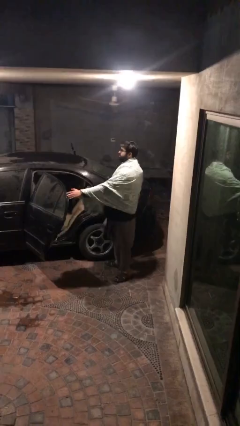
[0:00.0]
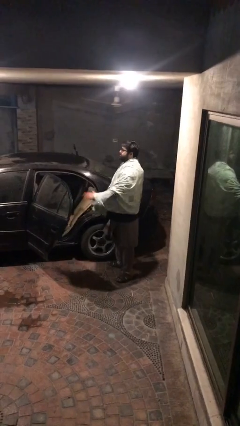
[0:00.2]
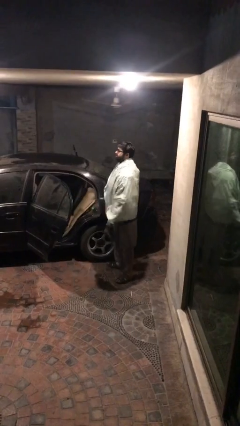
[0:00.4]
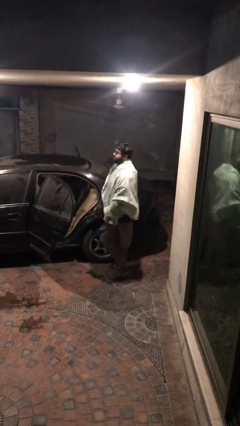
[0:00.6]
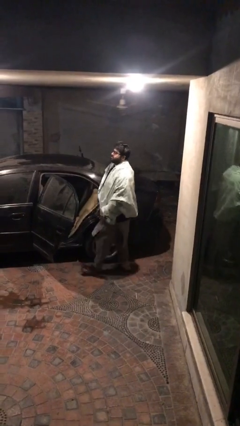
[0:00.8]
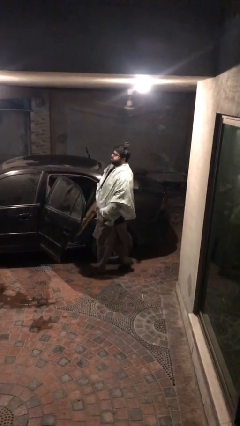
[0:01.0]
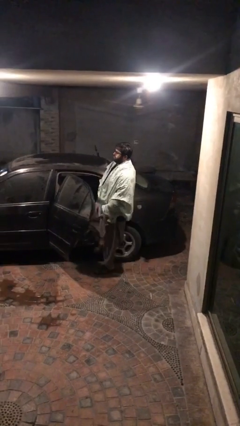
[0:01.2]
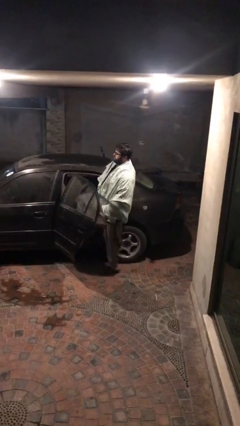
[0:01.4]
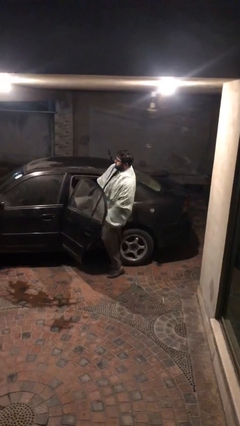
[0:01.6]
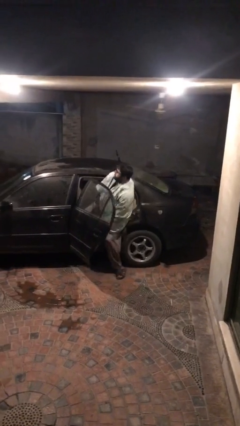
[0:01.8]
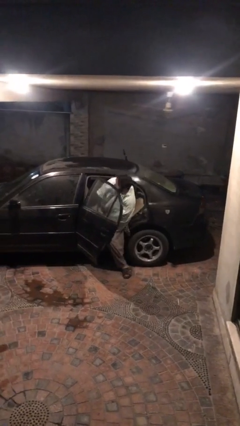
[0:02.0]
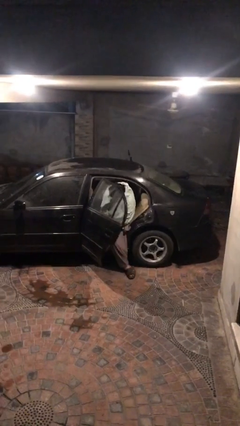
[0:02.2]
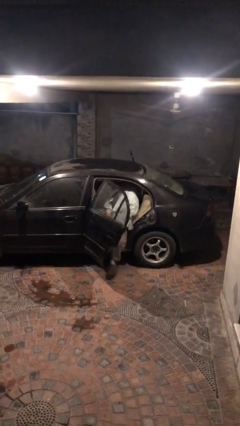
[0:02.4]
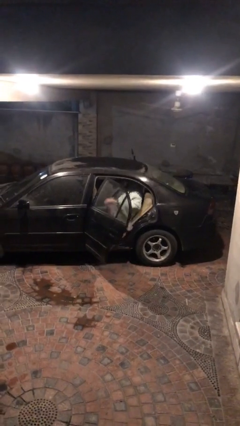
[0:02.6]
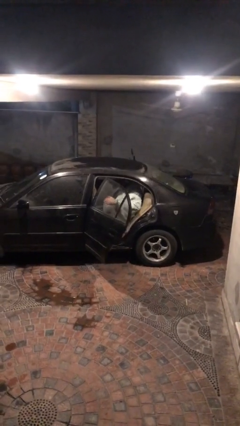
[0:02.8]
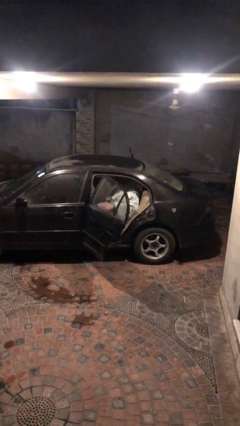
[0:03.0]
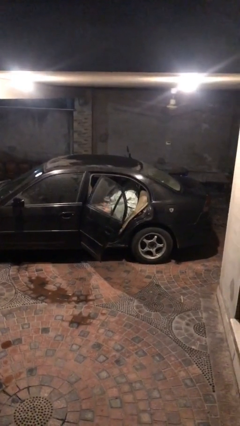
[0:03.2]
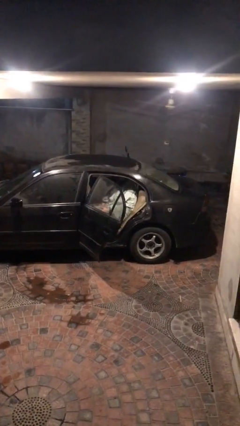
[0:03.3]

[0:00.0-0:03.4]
person enters car

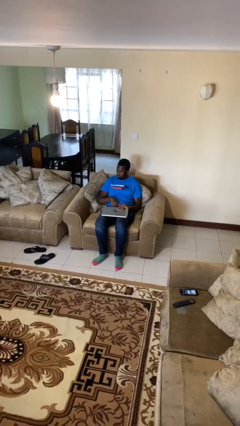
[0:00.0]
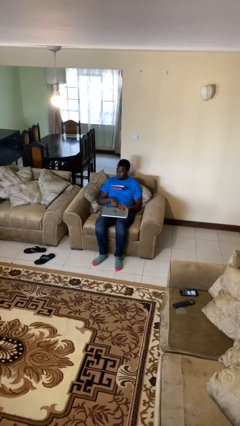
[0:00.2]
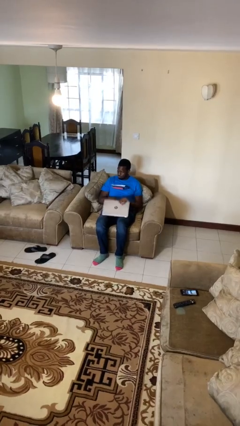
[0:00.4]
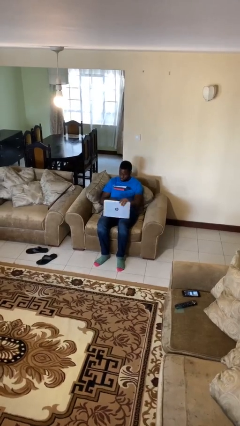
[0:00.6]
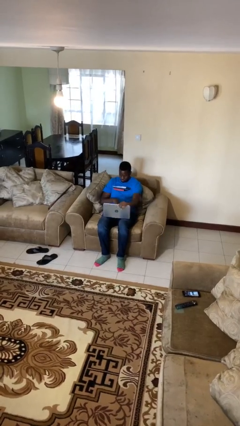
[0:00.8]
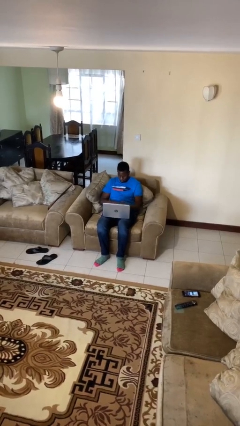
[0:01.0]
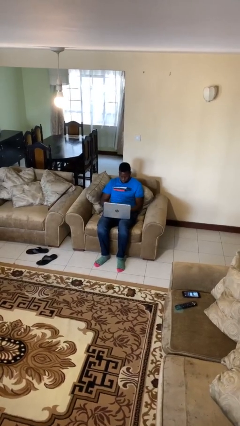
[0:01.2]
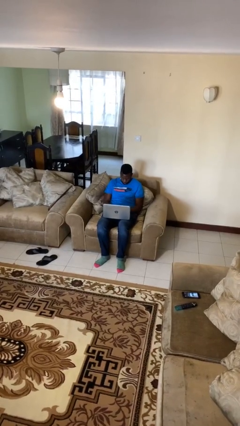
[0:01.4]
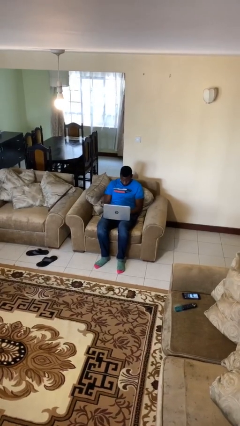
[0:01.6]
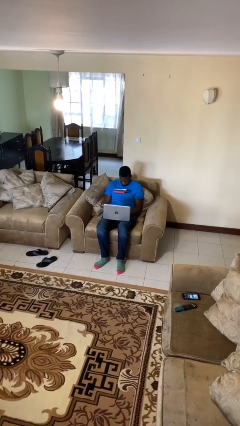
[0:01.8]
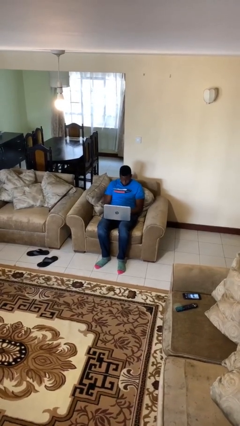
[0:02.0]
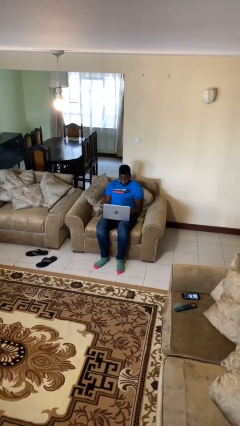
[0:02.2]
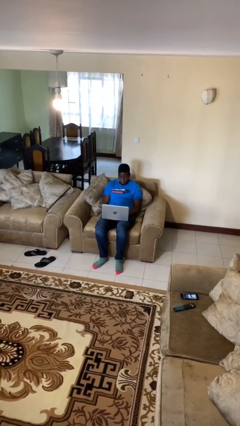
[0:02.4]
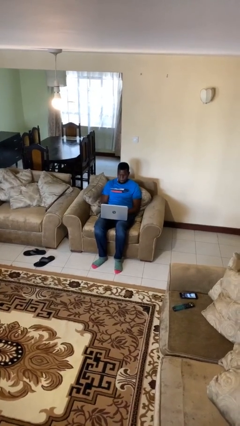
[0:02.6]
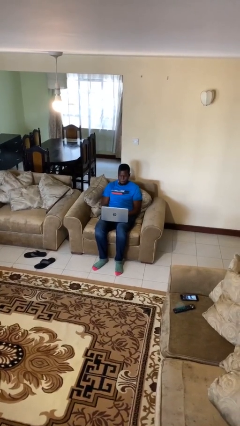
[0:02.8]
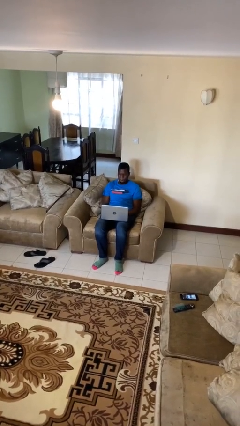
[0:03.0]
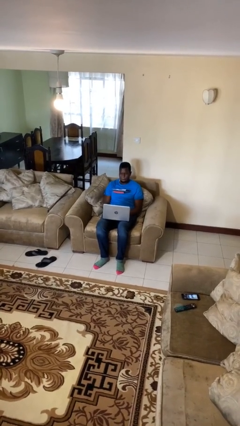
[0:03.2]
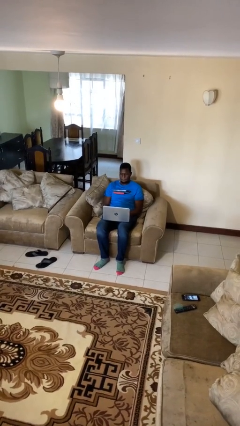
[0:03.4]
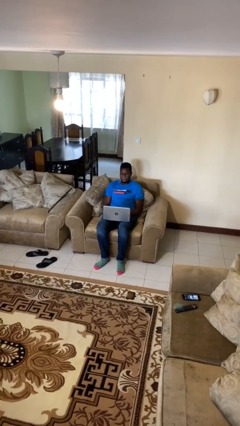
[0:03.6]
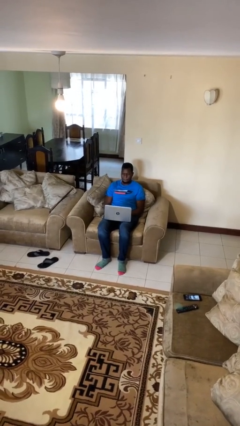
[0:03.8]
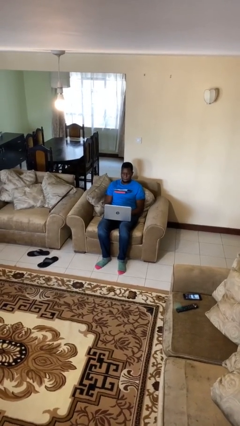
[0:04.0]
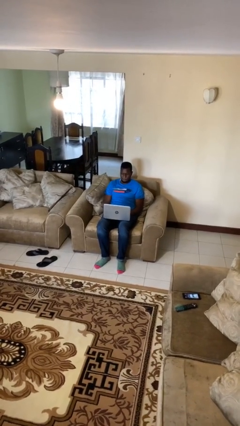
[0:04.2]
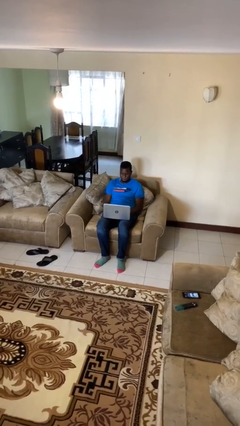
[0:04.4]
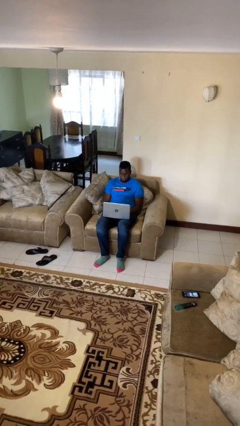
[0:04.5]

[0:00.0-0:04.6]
person interacts with laptop

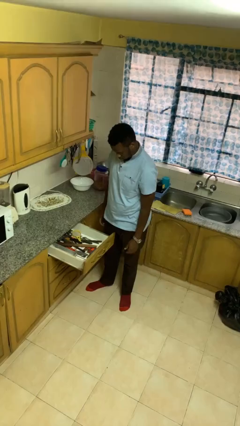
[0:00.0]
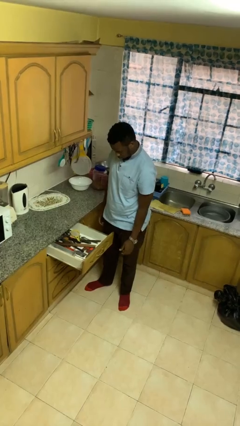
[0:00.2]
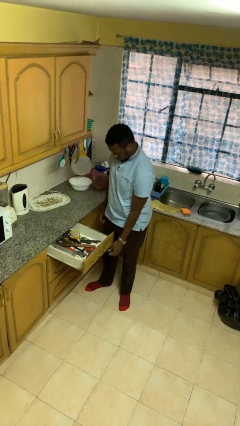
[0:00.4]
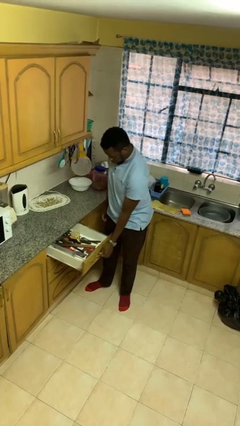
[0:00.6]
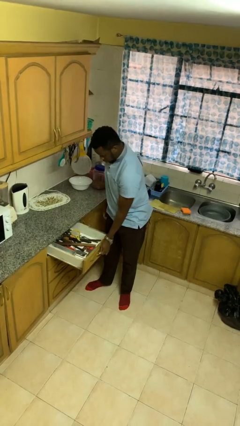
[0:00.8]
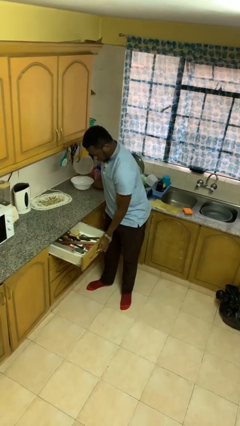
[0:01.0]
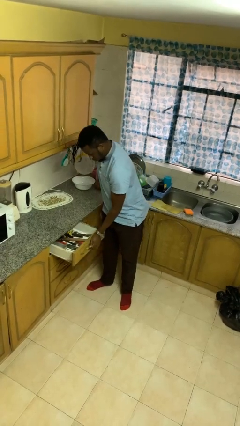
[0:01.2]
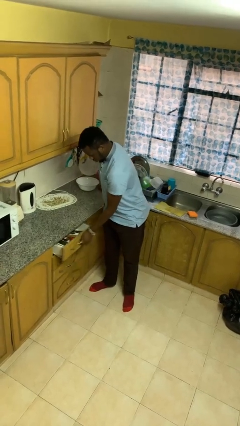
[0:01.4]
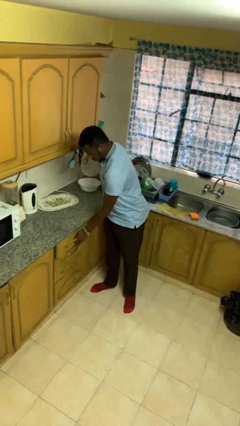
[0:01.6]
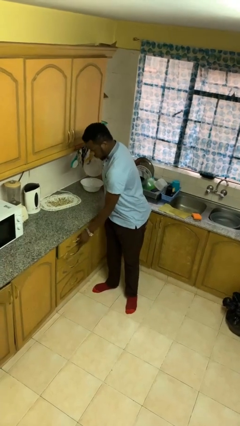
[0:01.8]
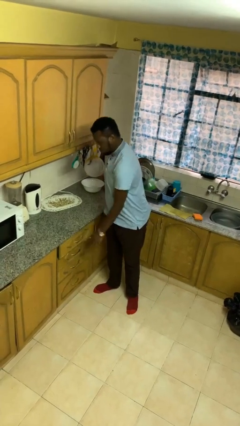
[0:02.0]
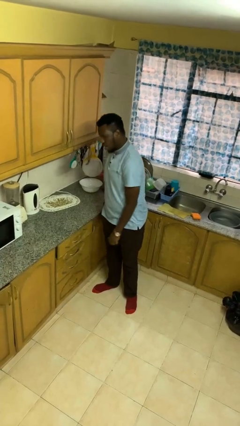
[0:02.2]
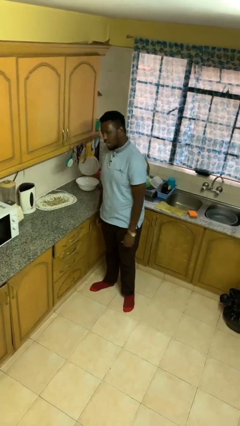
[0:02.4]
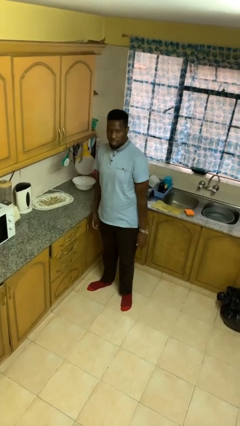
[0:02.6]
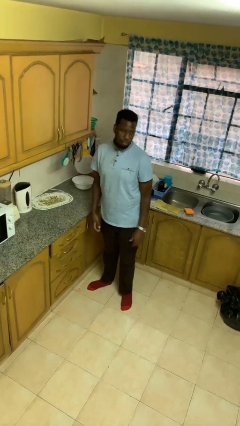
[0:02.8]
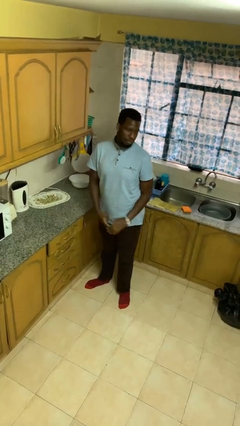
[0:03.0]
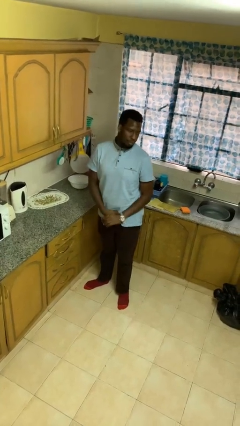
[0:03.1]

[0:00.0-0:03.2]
person closes kitchen drawer

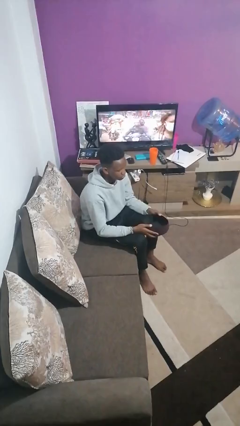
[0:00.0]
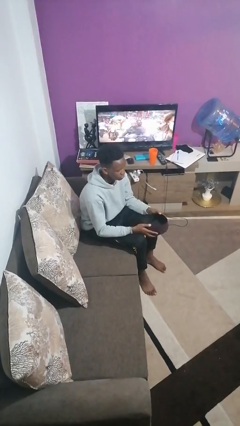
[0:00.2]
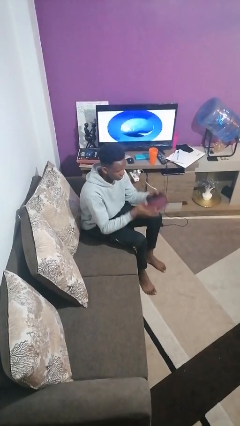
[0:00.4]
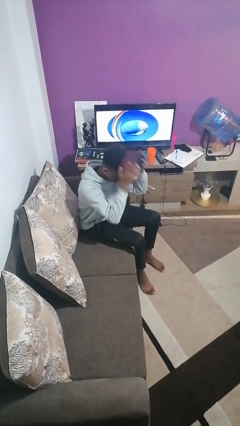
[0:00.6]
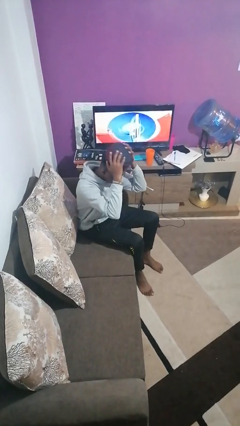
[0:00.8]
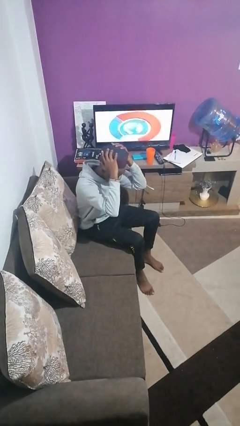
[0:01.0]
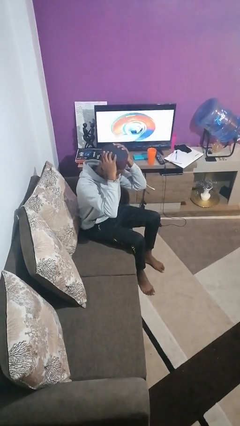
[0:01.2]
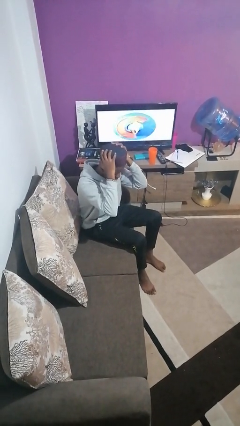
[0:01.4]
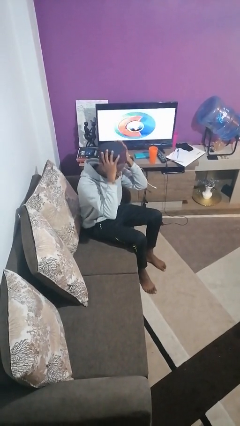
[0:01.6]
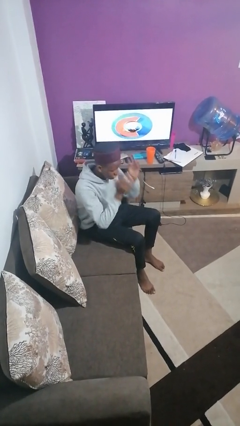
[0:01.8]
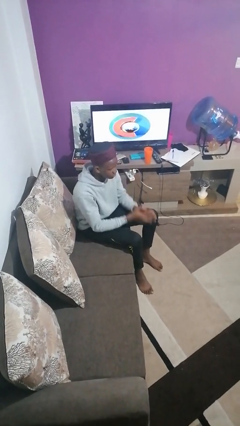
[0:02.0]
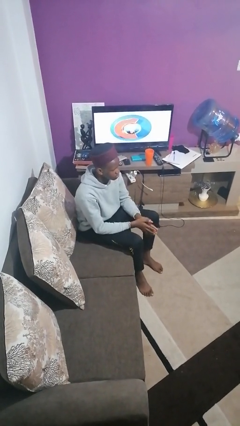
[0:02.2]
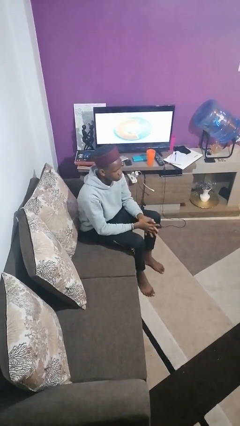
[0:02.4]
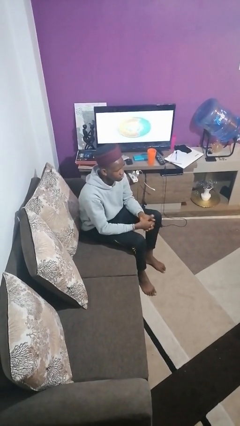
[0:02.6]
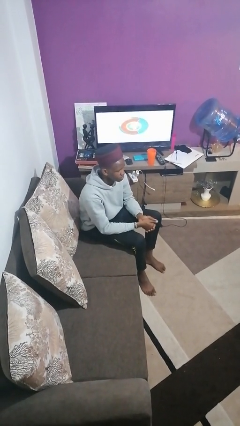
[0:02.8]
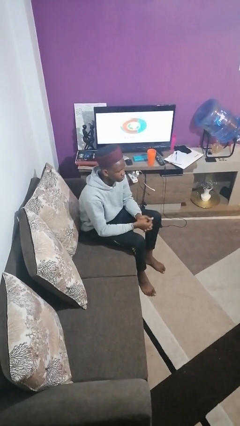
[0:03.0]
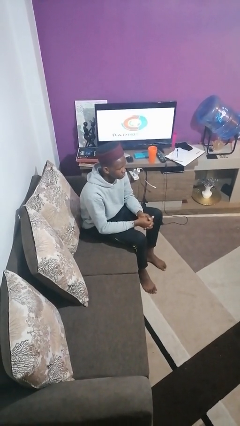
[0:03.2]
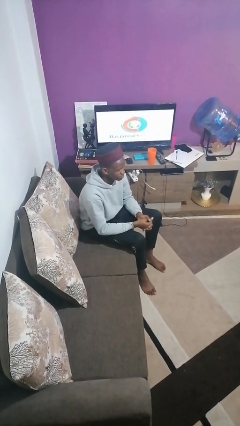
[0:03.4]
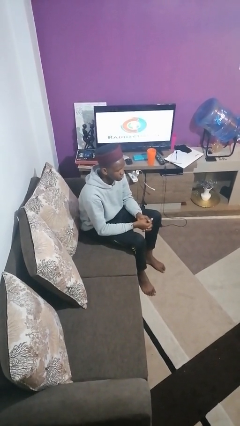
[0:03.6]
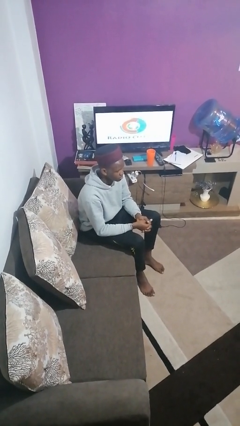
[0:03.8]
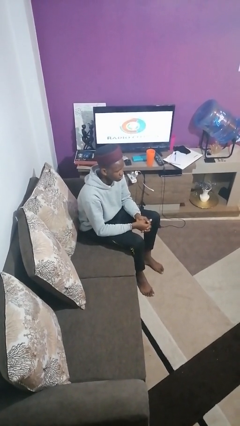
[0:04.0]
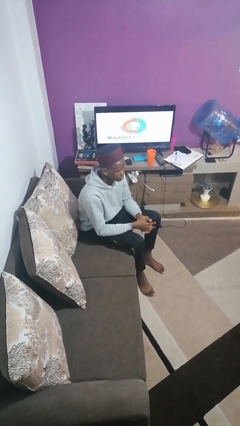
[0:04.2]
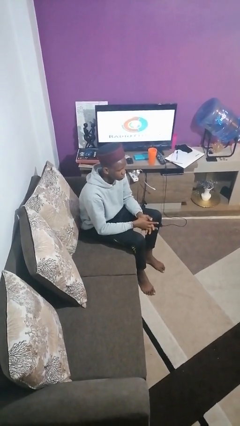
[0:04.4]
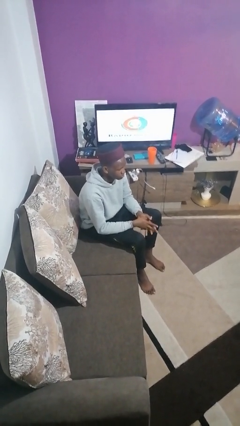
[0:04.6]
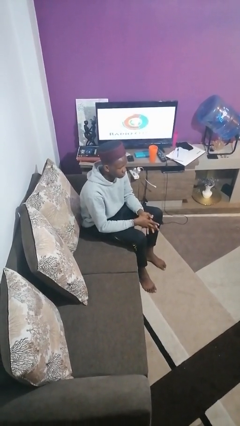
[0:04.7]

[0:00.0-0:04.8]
person puts on hat

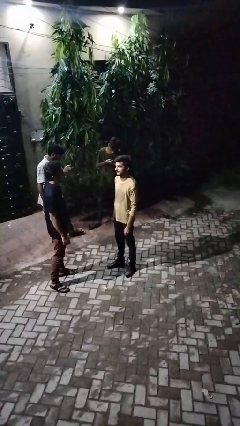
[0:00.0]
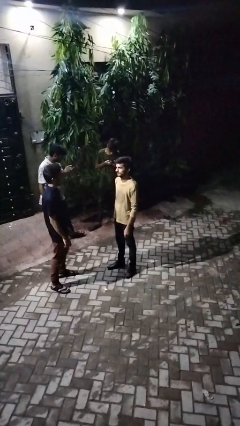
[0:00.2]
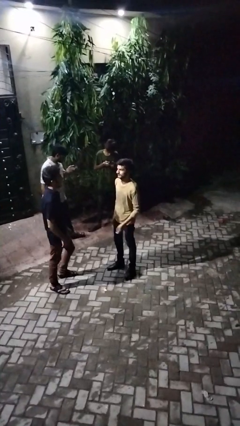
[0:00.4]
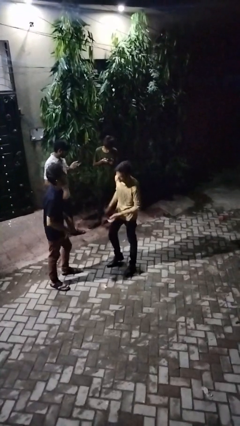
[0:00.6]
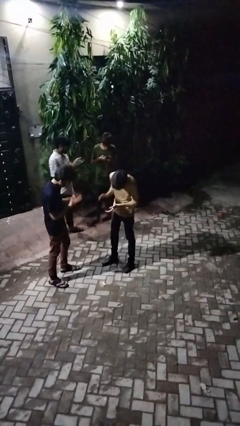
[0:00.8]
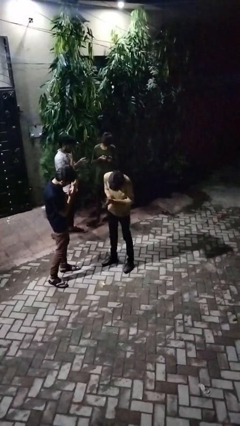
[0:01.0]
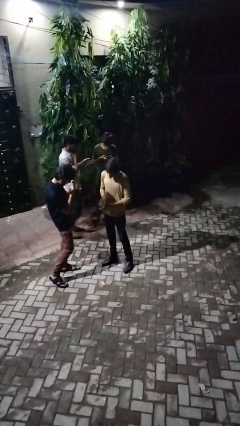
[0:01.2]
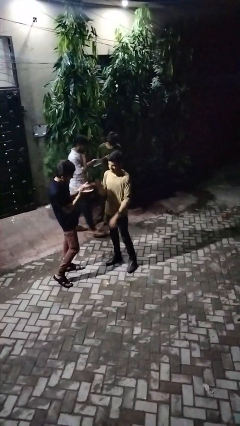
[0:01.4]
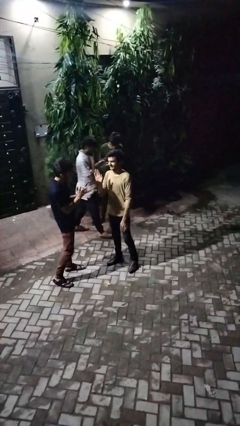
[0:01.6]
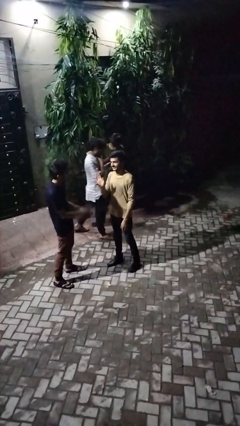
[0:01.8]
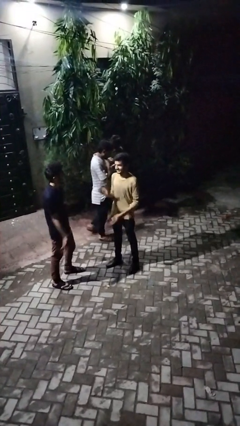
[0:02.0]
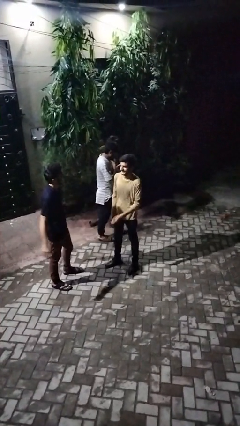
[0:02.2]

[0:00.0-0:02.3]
person laughs with person
